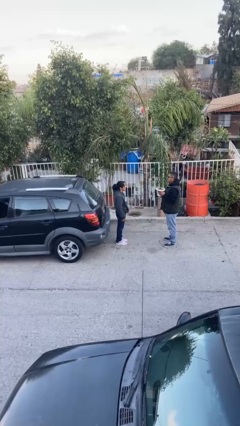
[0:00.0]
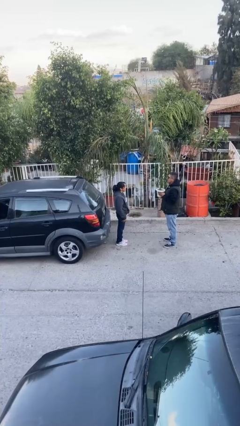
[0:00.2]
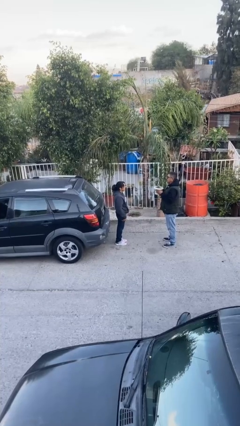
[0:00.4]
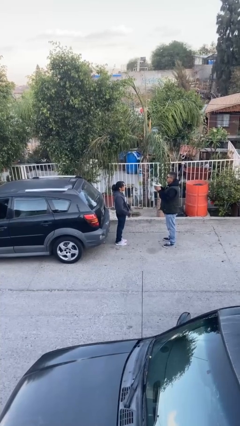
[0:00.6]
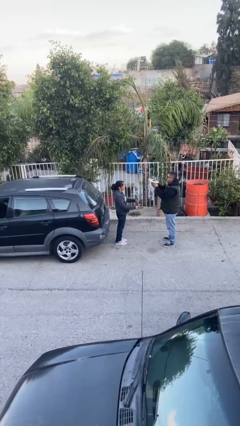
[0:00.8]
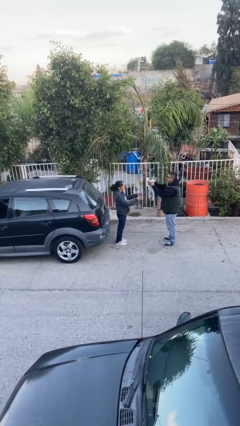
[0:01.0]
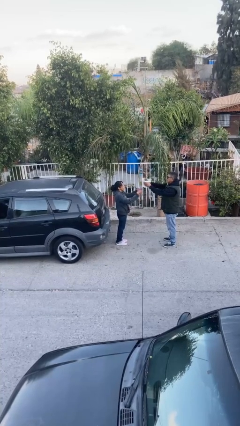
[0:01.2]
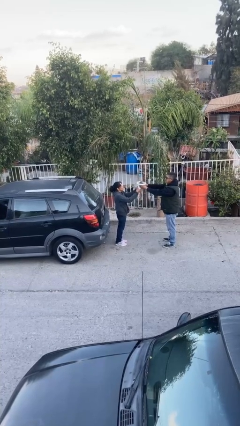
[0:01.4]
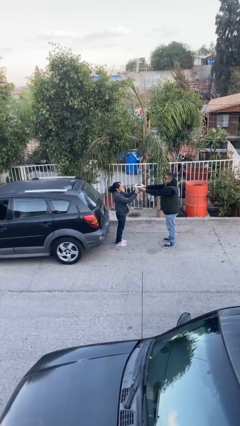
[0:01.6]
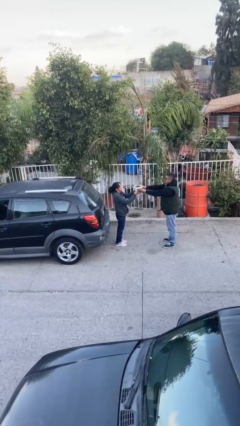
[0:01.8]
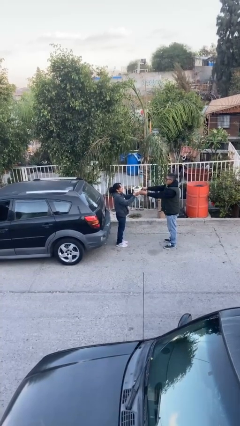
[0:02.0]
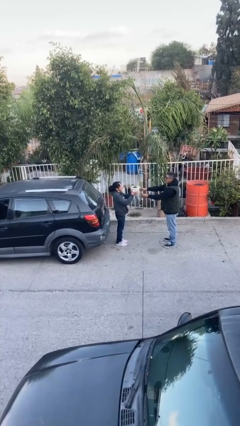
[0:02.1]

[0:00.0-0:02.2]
person transfers object to person

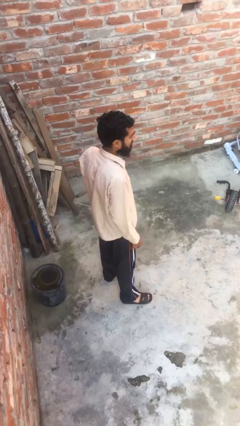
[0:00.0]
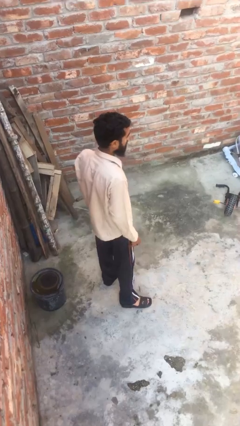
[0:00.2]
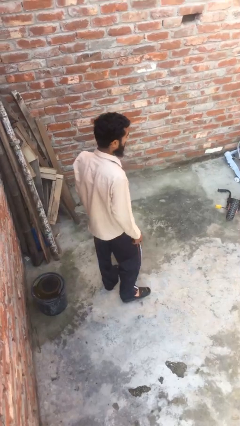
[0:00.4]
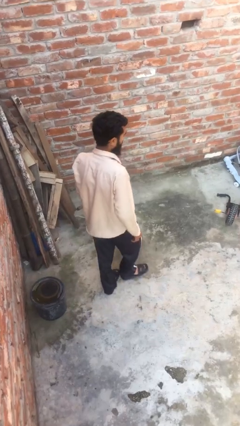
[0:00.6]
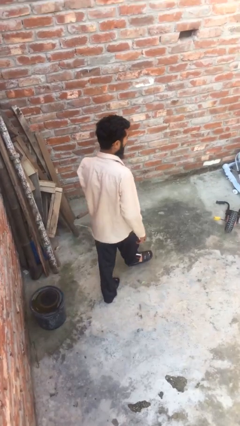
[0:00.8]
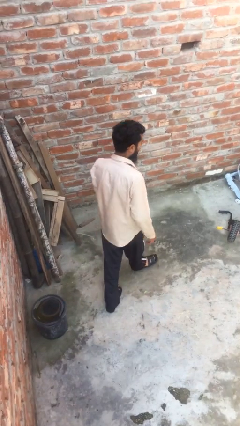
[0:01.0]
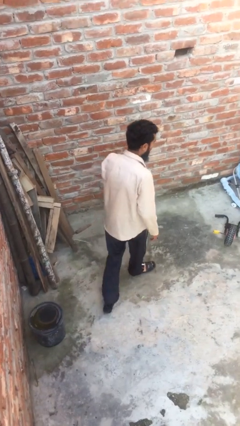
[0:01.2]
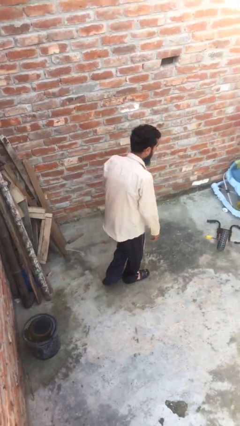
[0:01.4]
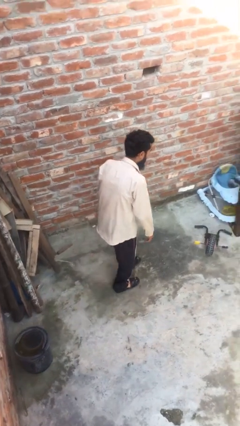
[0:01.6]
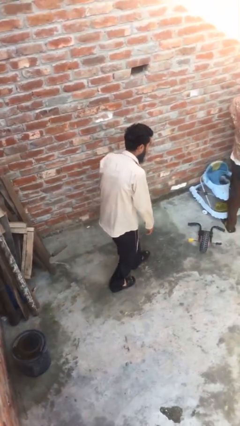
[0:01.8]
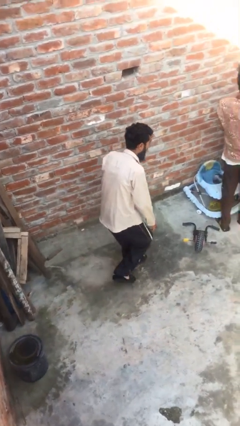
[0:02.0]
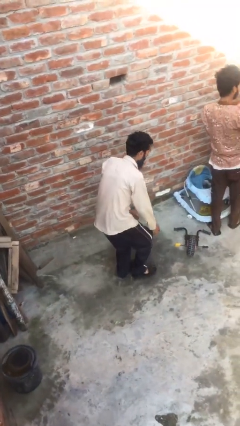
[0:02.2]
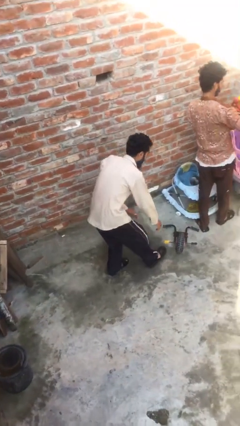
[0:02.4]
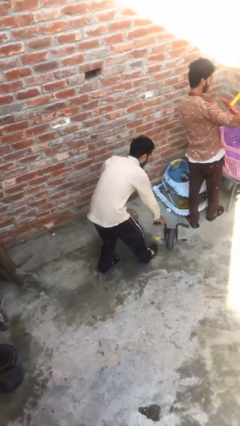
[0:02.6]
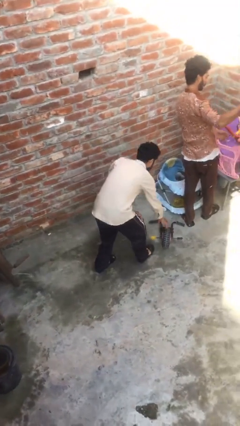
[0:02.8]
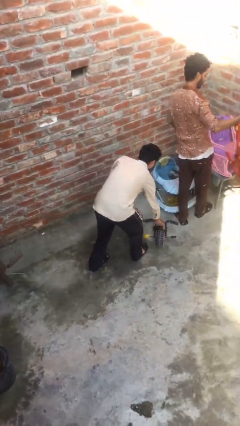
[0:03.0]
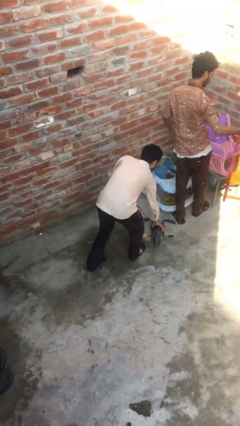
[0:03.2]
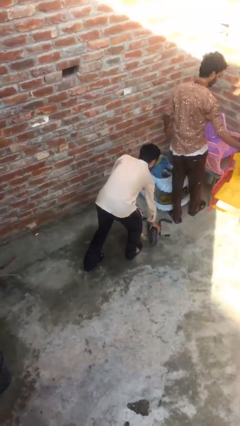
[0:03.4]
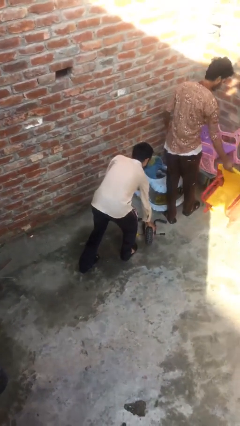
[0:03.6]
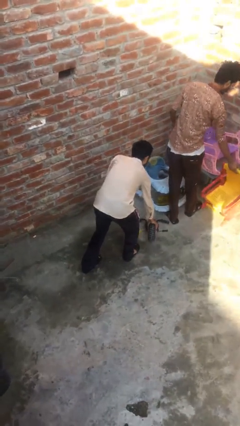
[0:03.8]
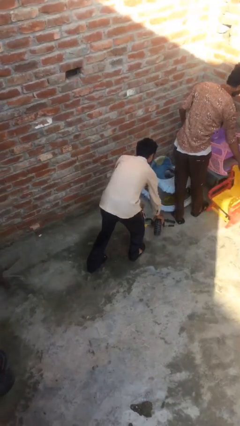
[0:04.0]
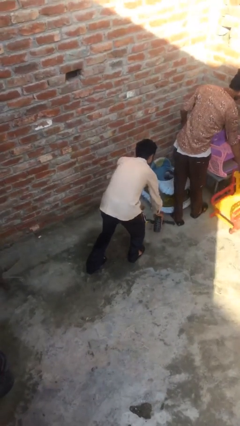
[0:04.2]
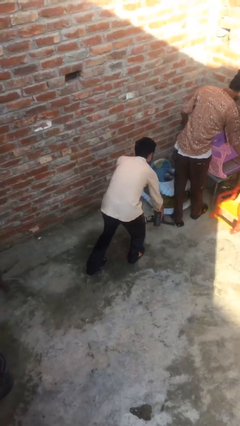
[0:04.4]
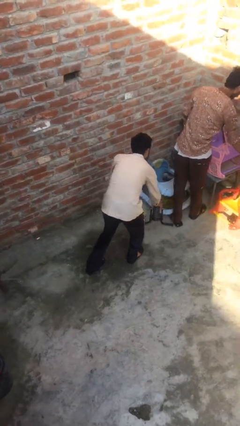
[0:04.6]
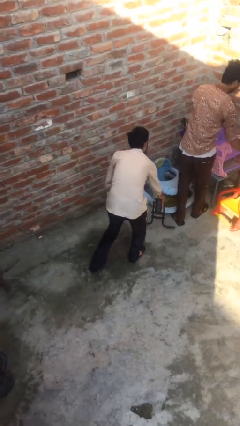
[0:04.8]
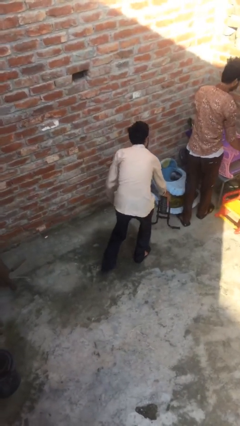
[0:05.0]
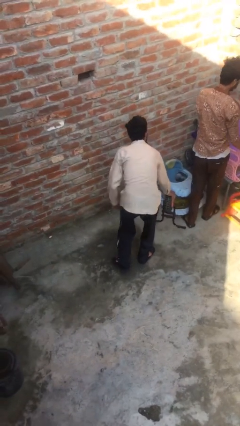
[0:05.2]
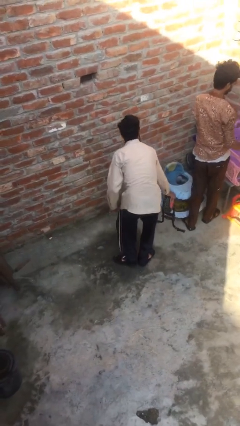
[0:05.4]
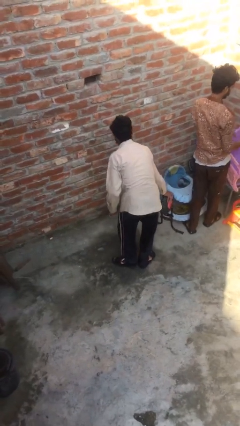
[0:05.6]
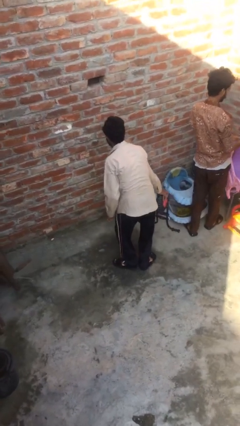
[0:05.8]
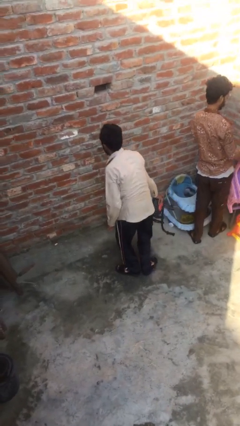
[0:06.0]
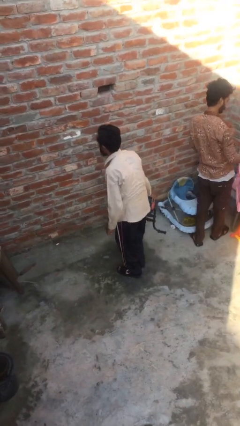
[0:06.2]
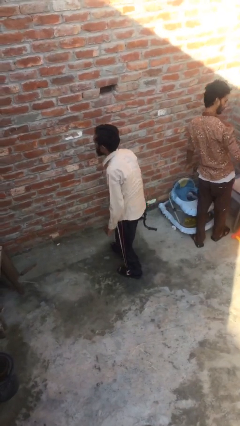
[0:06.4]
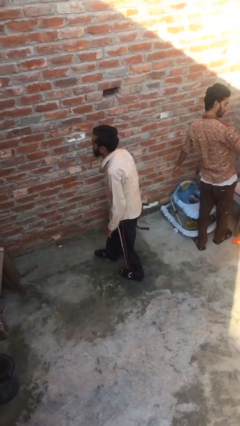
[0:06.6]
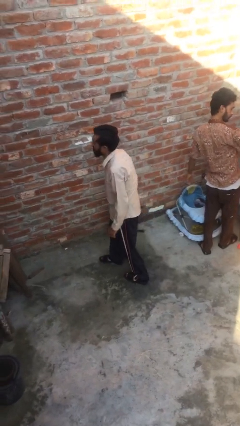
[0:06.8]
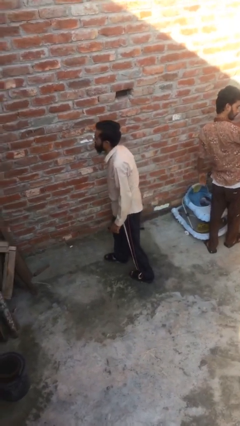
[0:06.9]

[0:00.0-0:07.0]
person steals object from person

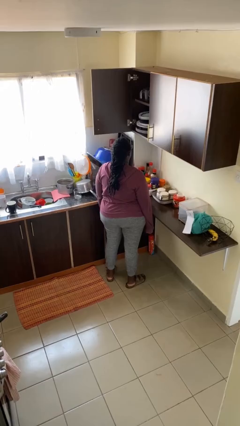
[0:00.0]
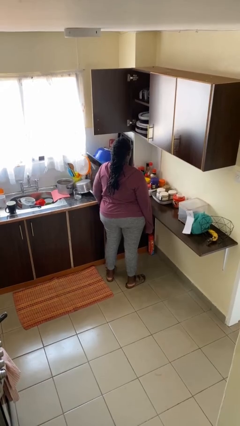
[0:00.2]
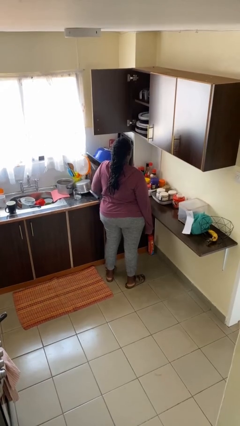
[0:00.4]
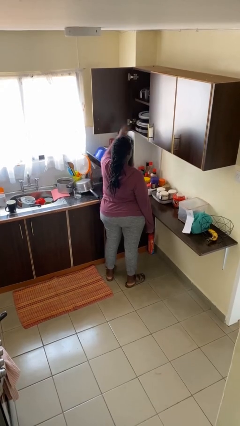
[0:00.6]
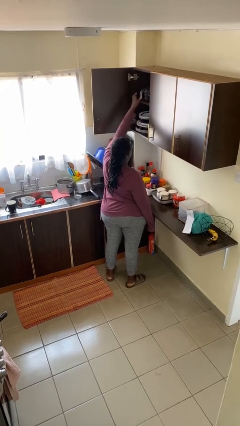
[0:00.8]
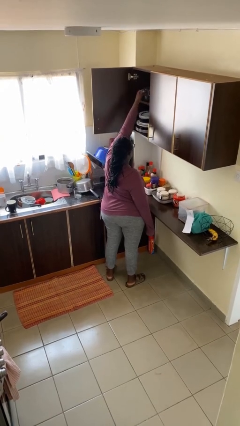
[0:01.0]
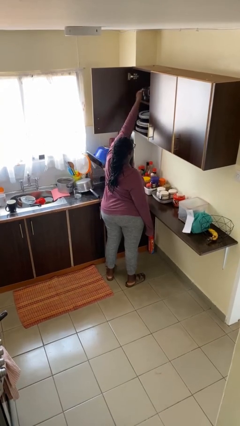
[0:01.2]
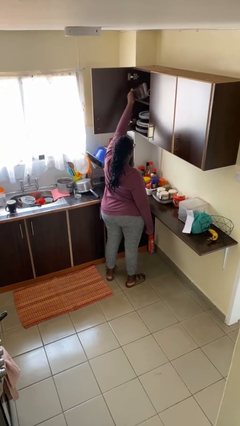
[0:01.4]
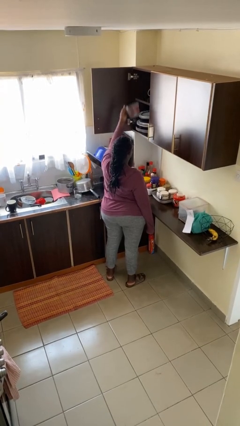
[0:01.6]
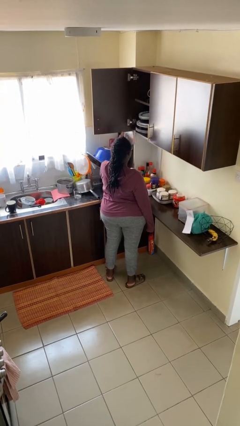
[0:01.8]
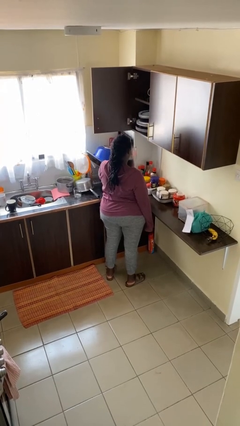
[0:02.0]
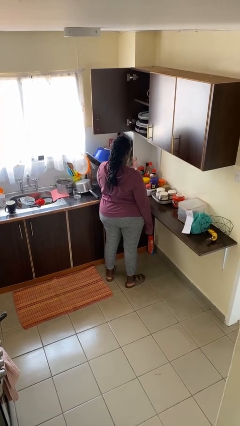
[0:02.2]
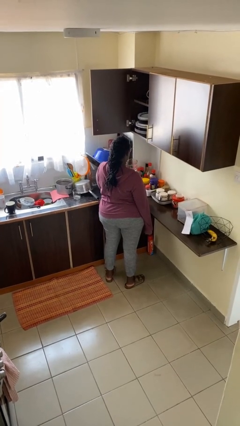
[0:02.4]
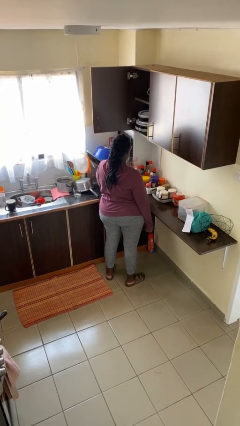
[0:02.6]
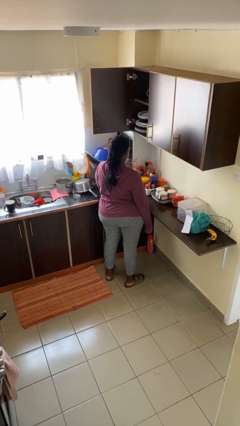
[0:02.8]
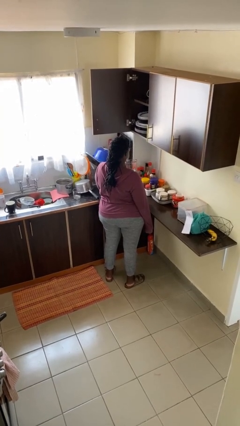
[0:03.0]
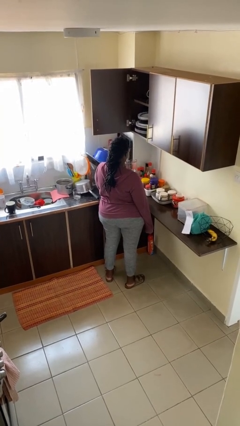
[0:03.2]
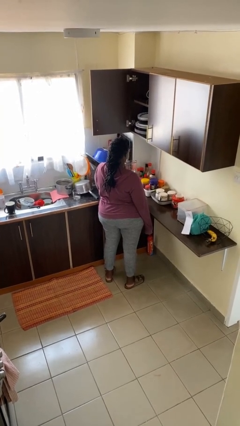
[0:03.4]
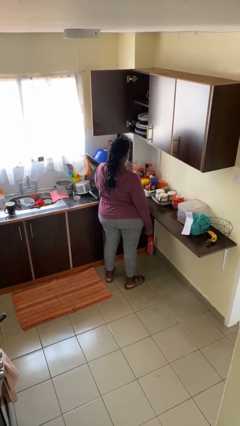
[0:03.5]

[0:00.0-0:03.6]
person picks up object from cabinet

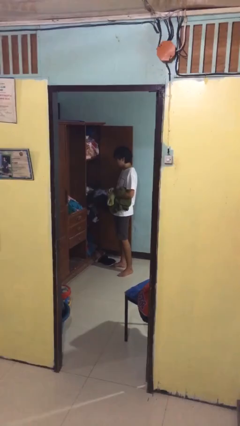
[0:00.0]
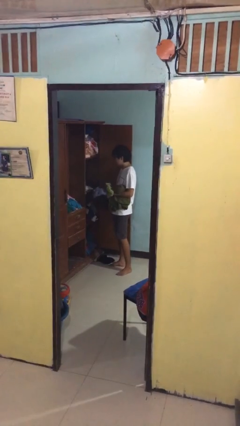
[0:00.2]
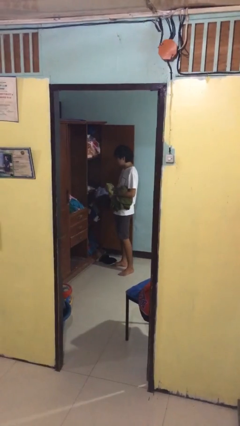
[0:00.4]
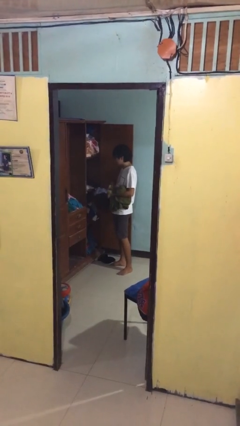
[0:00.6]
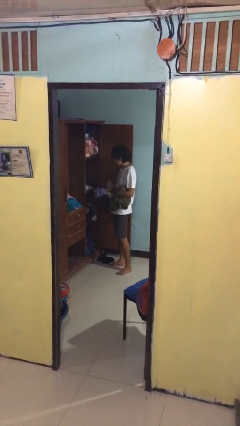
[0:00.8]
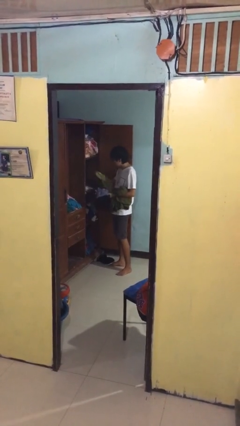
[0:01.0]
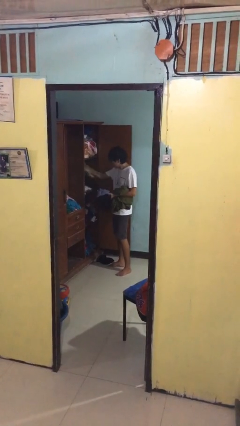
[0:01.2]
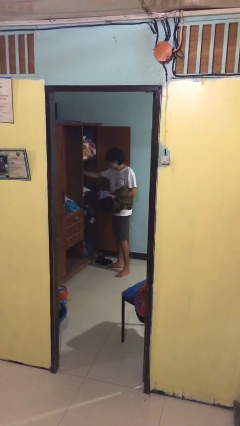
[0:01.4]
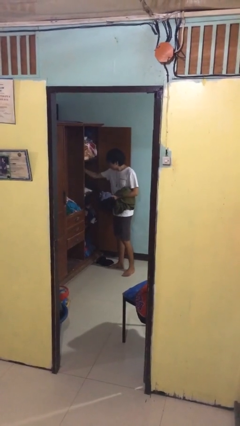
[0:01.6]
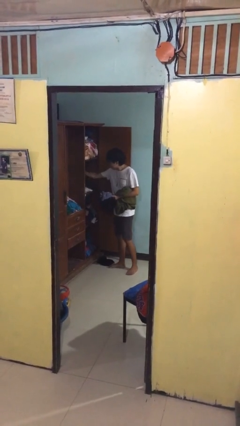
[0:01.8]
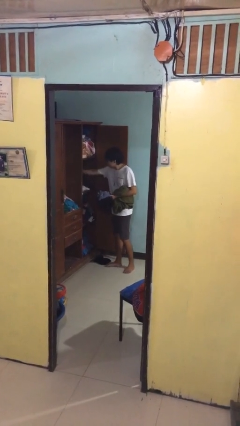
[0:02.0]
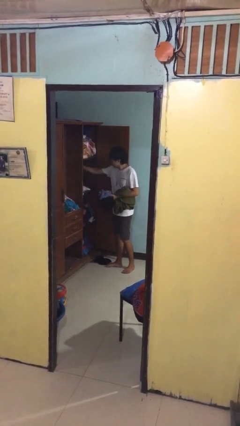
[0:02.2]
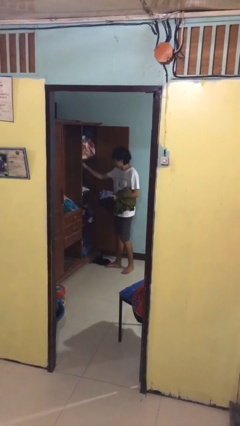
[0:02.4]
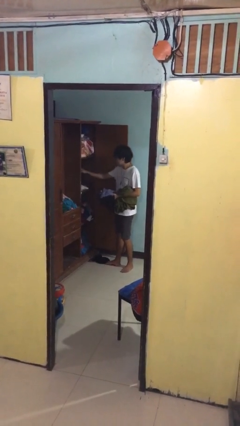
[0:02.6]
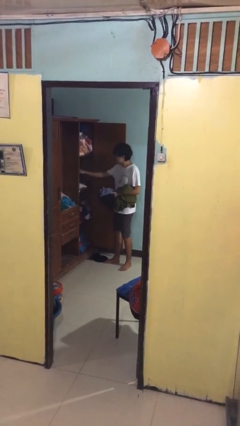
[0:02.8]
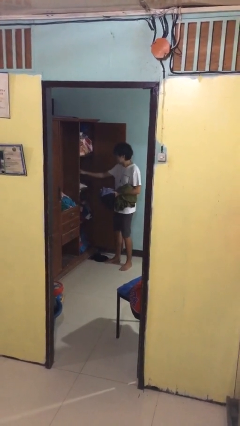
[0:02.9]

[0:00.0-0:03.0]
person puts clothes into dresser

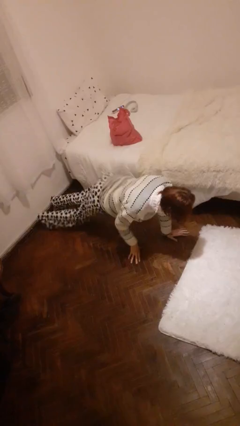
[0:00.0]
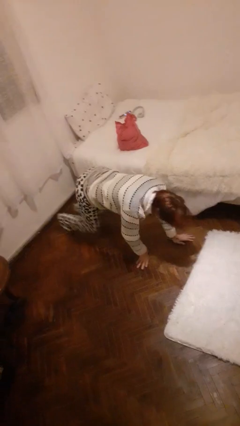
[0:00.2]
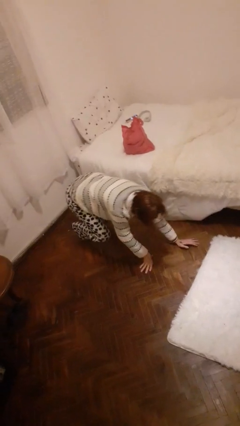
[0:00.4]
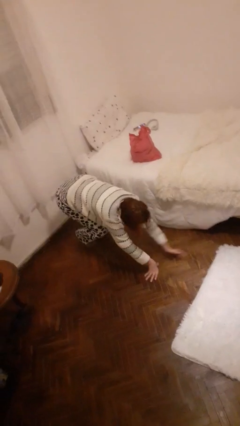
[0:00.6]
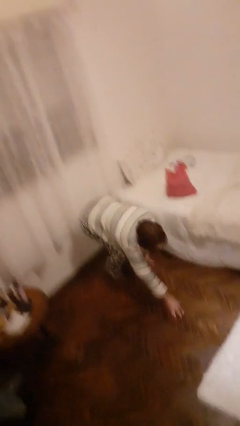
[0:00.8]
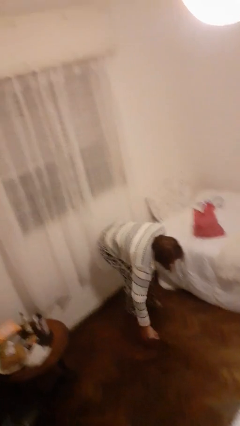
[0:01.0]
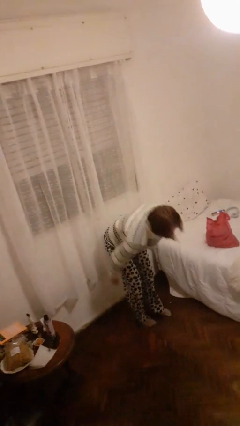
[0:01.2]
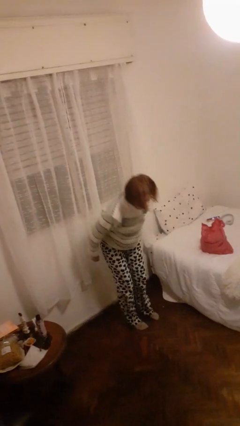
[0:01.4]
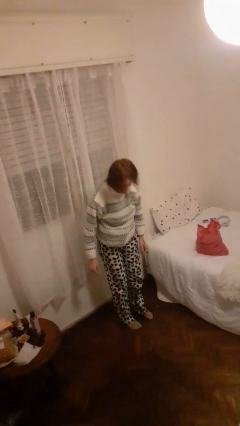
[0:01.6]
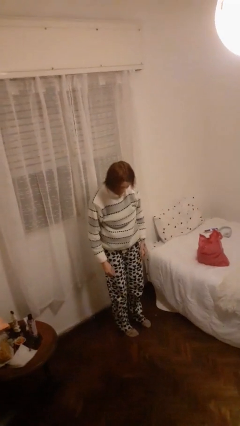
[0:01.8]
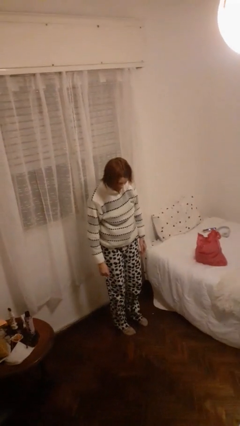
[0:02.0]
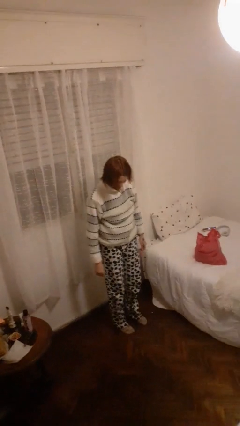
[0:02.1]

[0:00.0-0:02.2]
person stands up from floor
